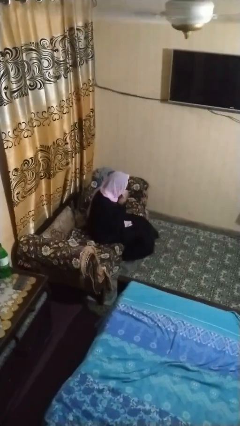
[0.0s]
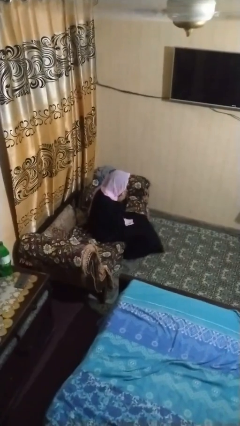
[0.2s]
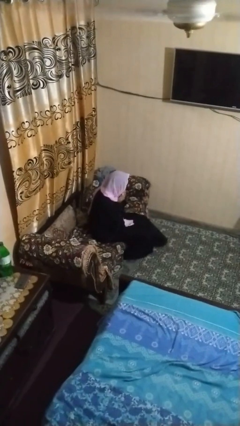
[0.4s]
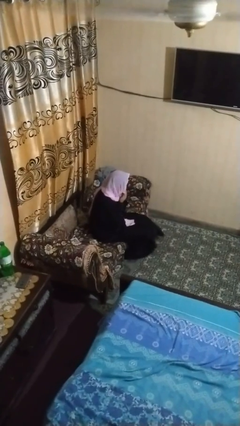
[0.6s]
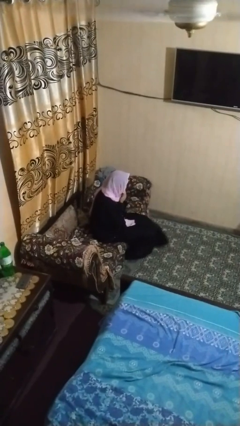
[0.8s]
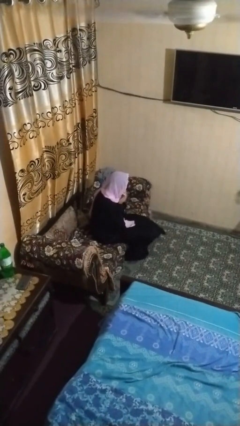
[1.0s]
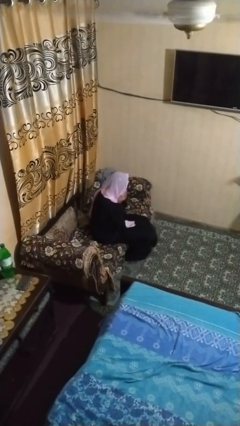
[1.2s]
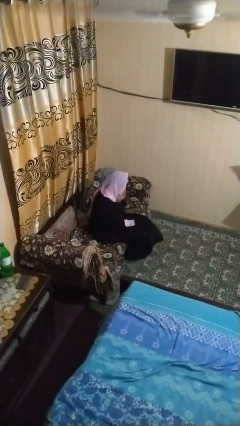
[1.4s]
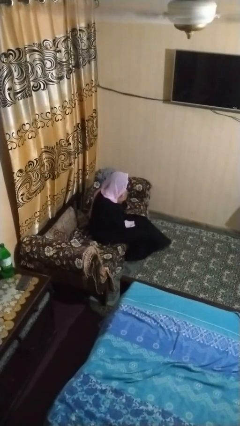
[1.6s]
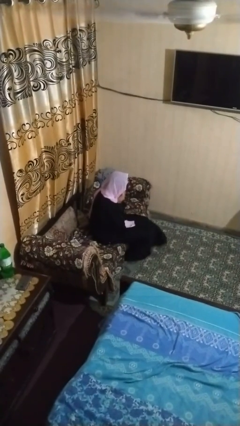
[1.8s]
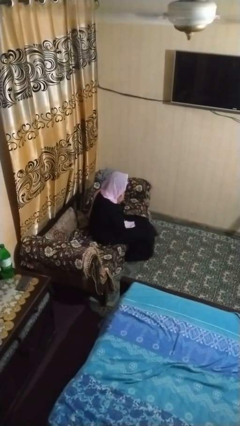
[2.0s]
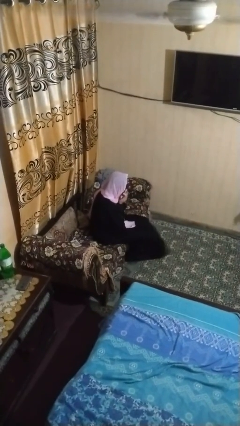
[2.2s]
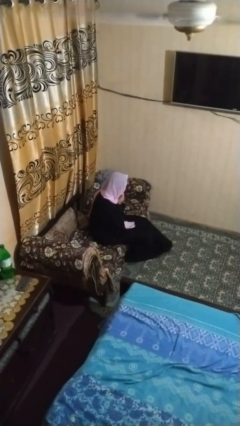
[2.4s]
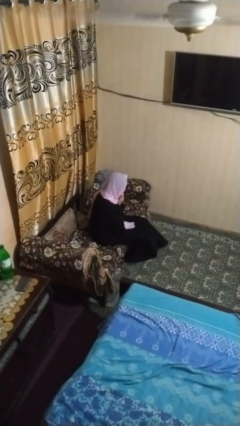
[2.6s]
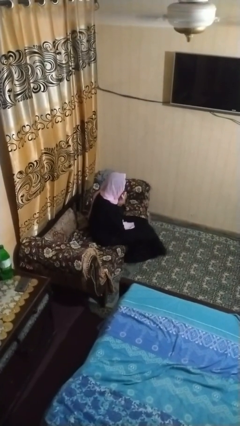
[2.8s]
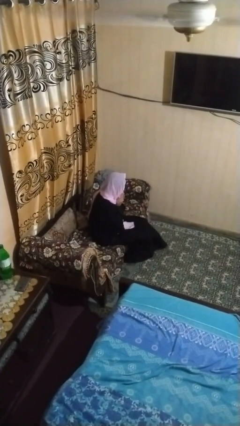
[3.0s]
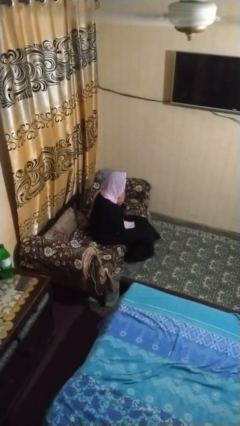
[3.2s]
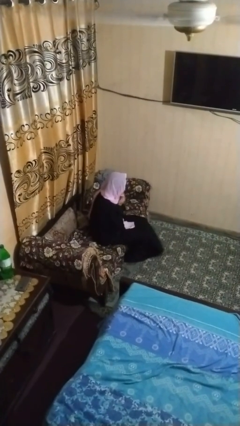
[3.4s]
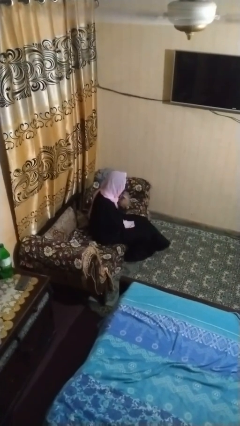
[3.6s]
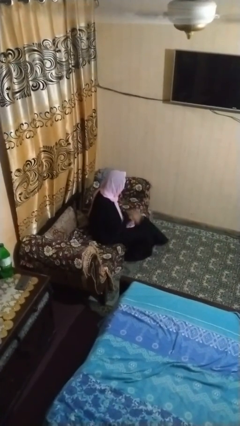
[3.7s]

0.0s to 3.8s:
person wipes mouth with napkin

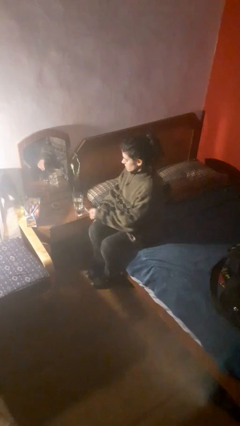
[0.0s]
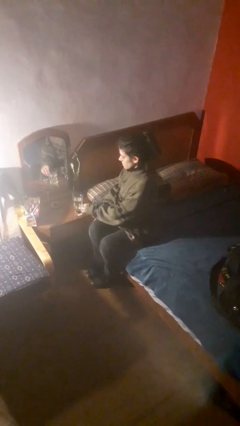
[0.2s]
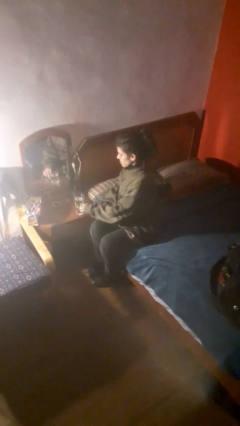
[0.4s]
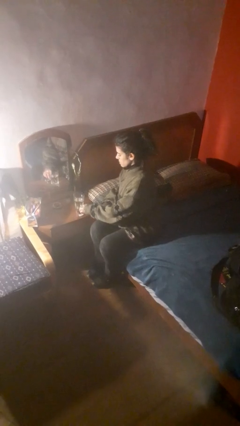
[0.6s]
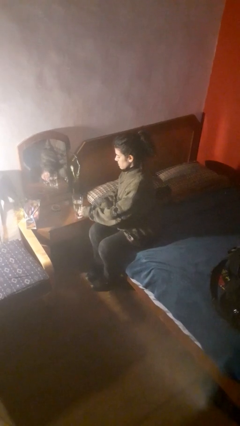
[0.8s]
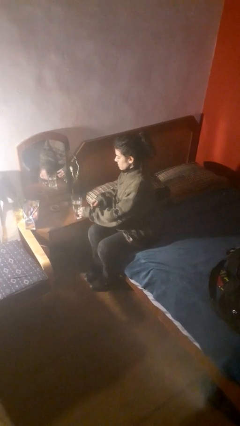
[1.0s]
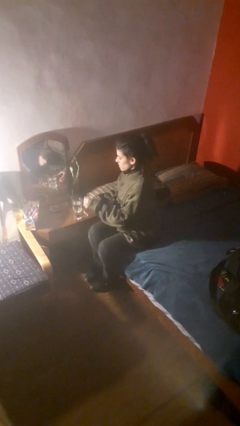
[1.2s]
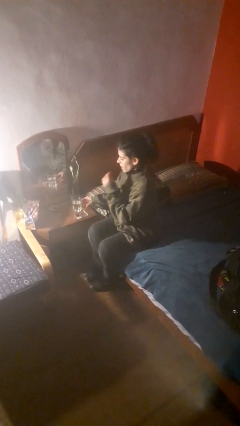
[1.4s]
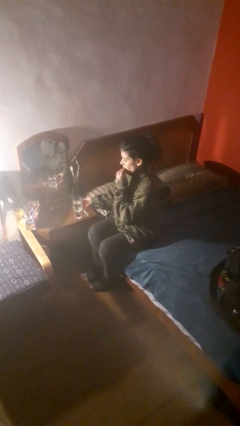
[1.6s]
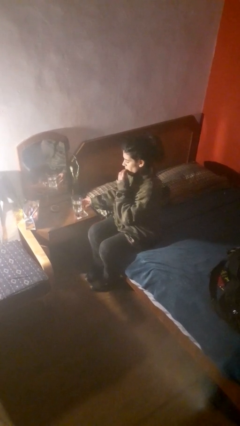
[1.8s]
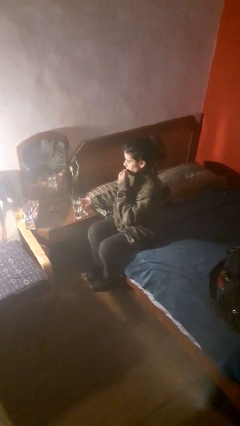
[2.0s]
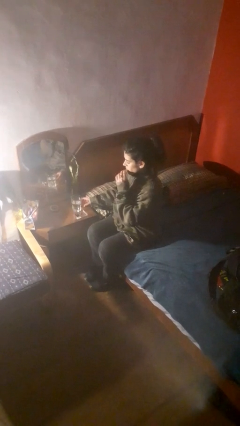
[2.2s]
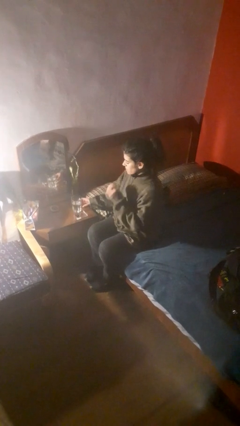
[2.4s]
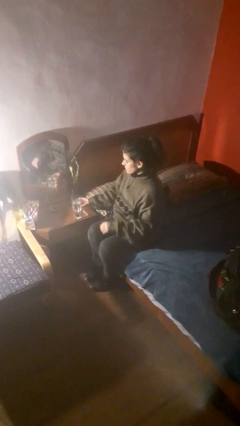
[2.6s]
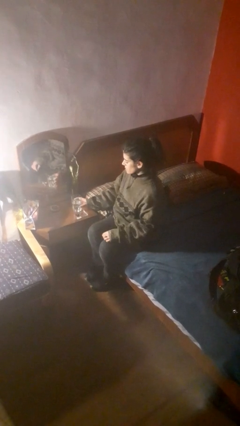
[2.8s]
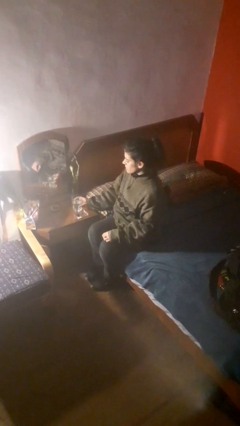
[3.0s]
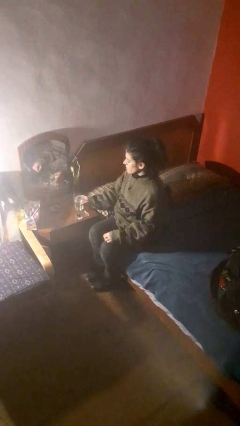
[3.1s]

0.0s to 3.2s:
person takes medicine pills

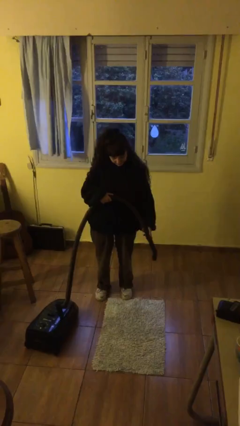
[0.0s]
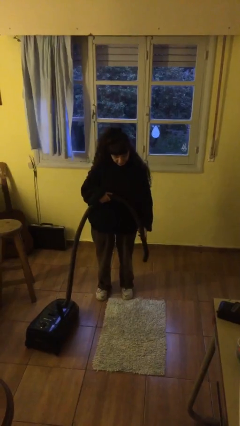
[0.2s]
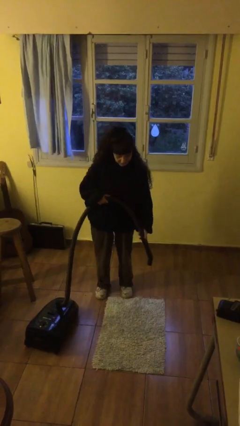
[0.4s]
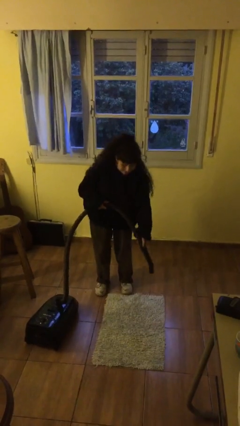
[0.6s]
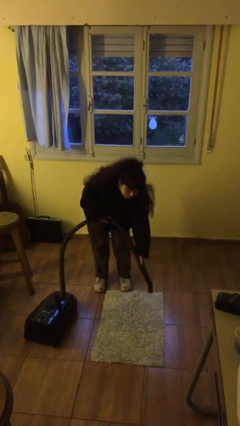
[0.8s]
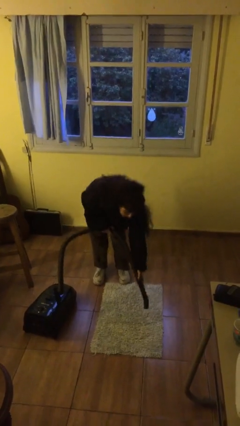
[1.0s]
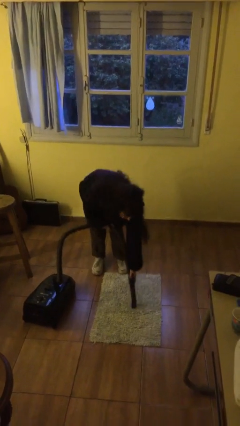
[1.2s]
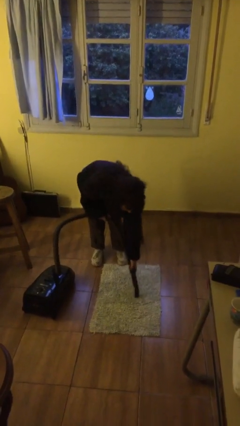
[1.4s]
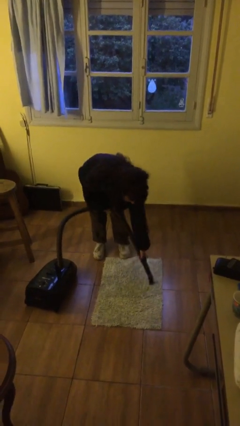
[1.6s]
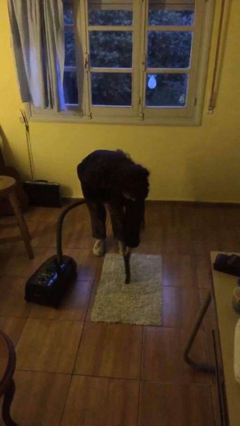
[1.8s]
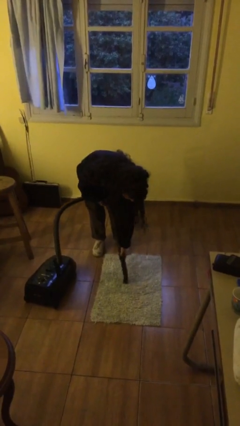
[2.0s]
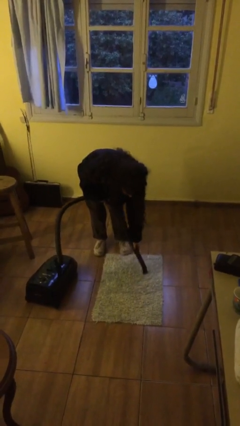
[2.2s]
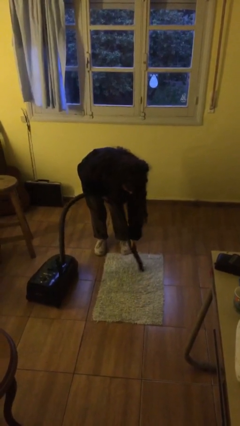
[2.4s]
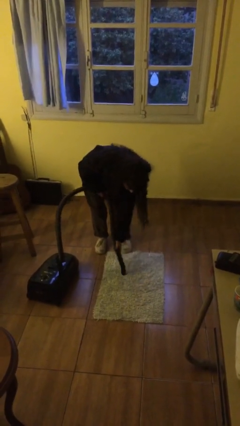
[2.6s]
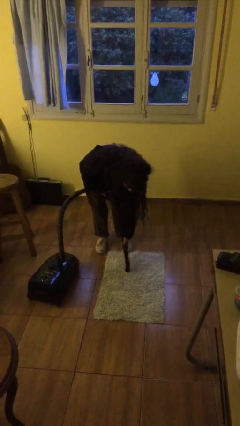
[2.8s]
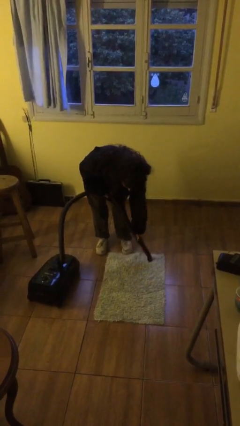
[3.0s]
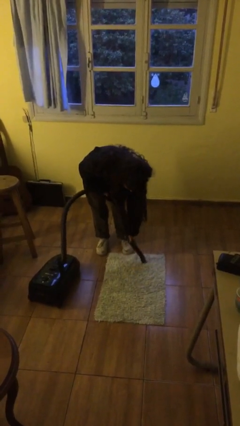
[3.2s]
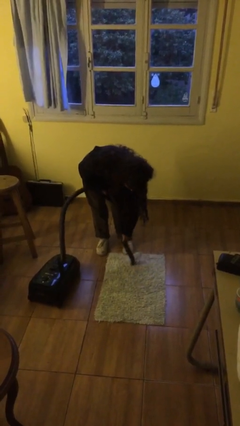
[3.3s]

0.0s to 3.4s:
person vacuums carpet

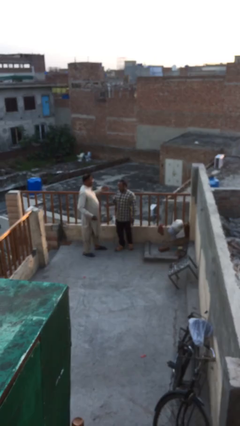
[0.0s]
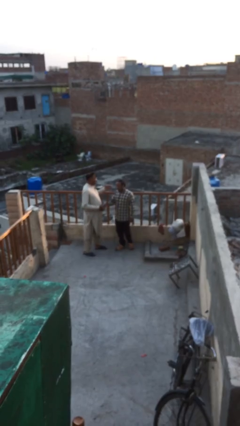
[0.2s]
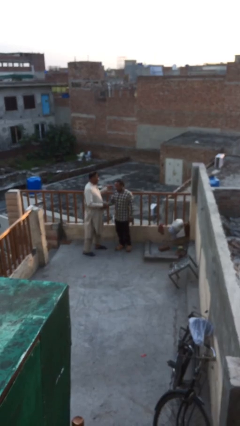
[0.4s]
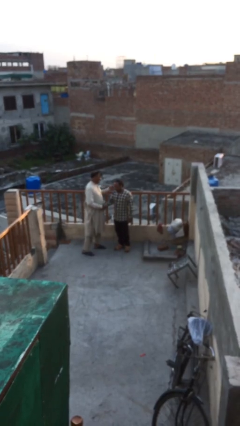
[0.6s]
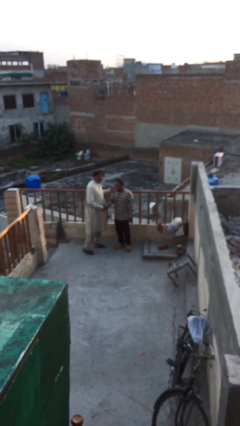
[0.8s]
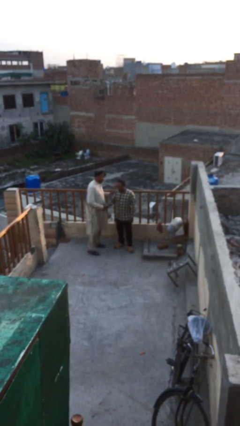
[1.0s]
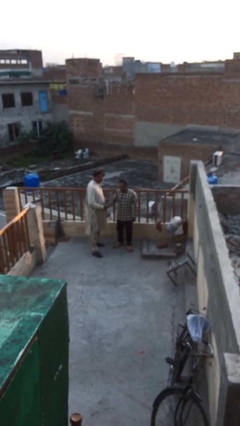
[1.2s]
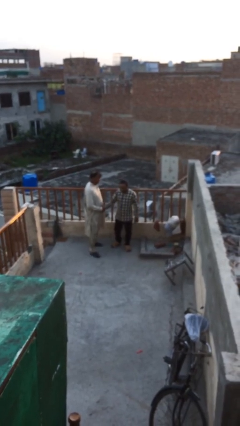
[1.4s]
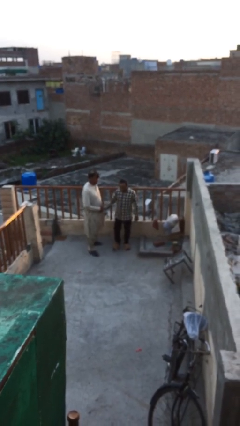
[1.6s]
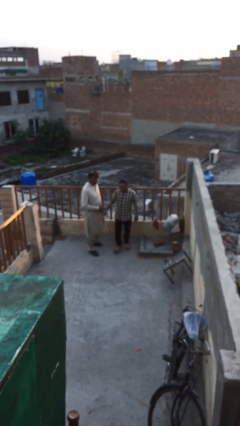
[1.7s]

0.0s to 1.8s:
person shakes hand

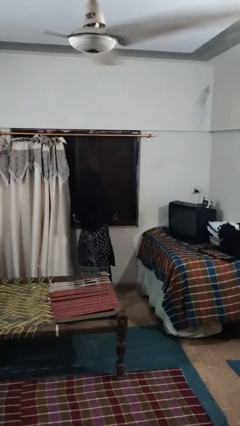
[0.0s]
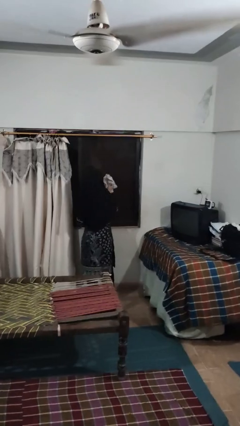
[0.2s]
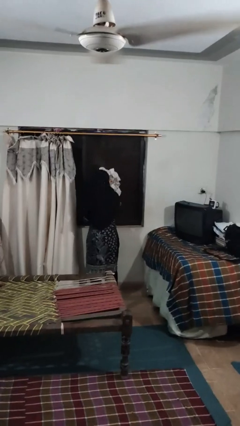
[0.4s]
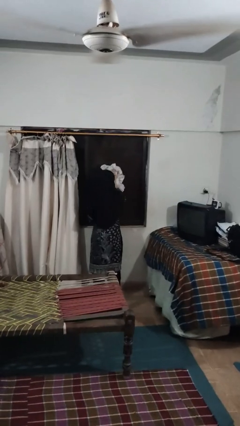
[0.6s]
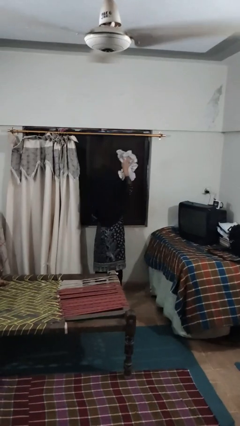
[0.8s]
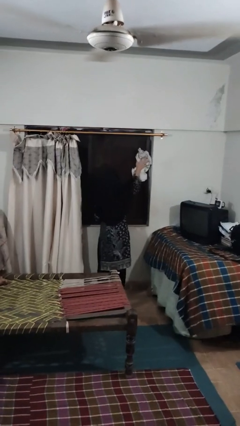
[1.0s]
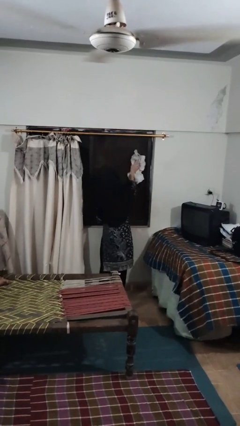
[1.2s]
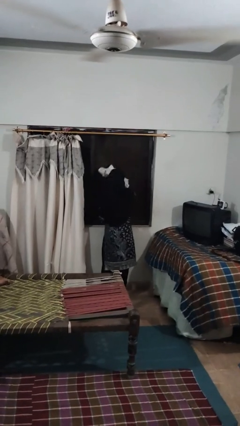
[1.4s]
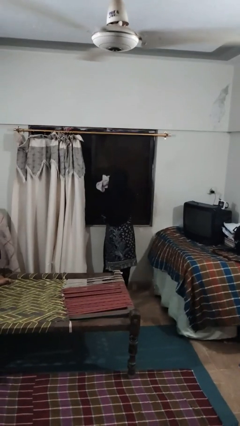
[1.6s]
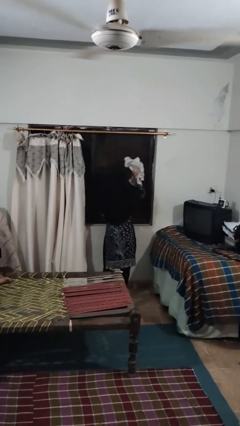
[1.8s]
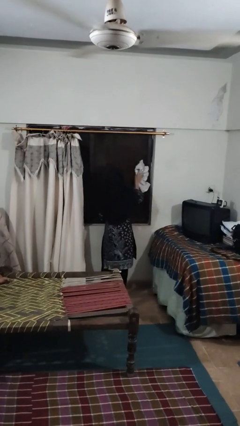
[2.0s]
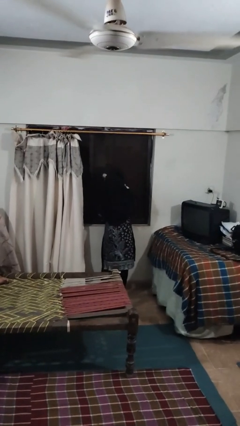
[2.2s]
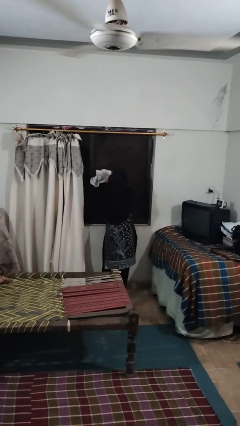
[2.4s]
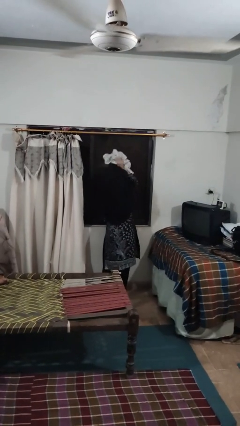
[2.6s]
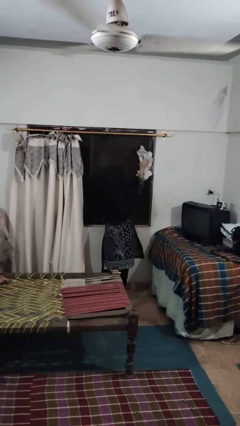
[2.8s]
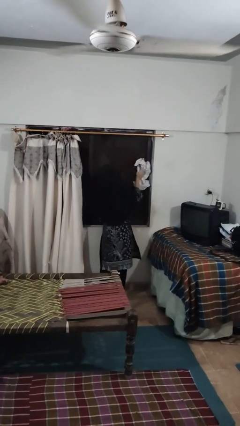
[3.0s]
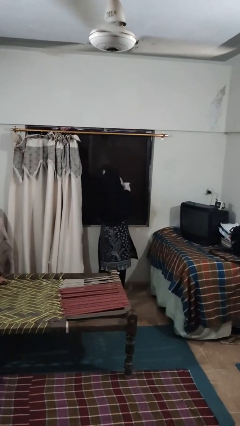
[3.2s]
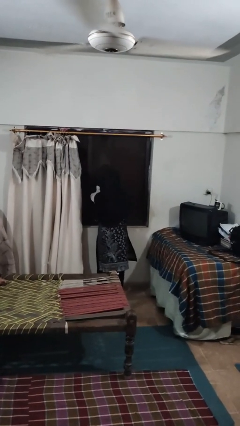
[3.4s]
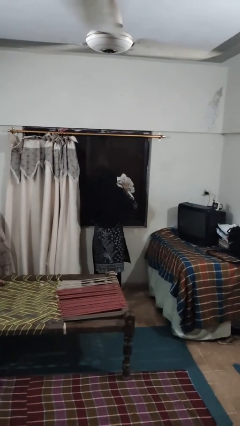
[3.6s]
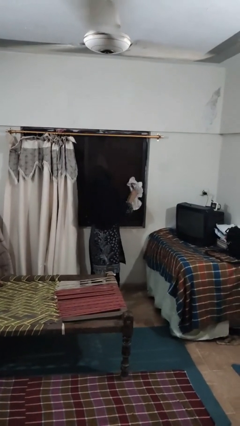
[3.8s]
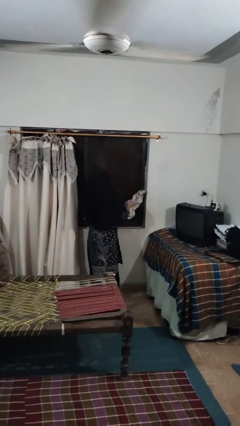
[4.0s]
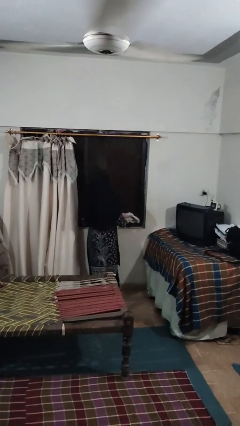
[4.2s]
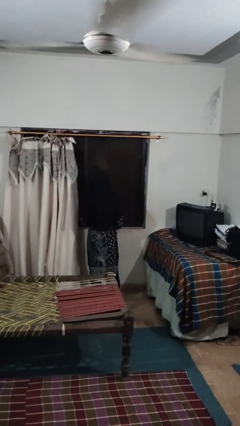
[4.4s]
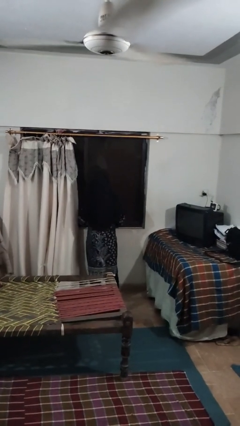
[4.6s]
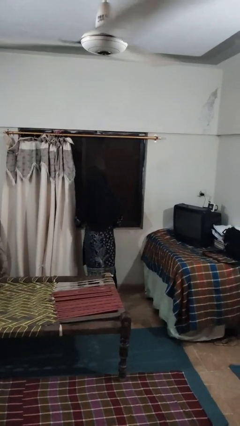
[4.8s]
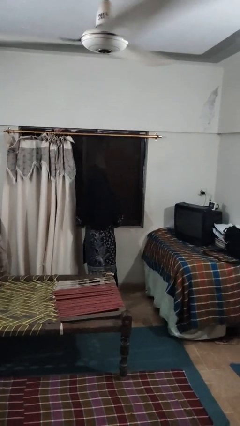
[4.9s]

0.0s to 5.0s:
person washes window

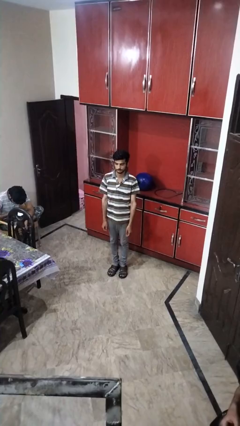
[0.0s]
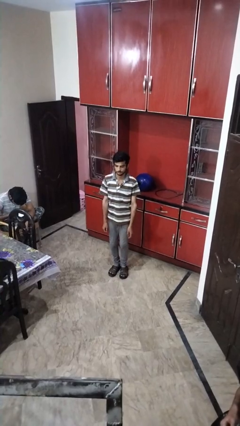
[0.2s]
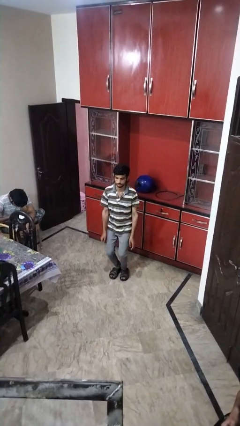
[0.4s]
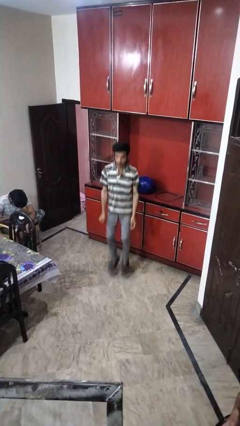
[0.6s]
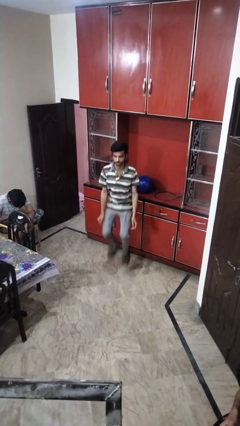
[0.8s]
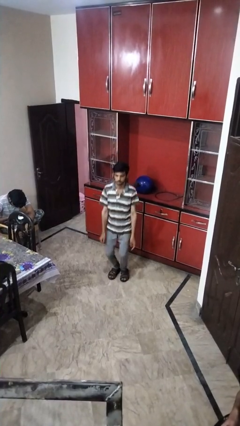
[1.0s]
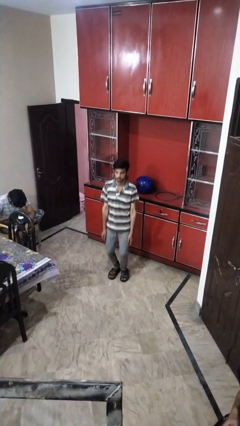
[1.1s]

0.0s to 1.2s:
person jumps
